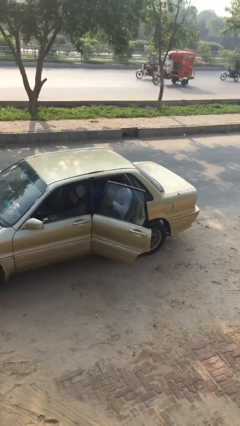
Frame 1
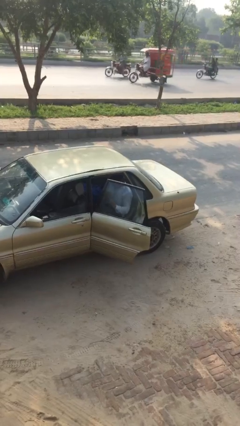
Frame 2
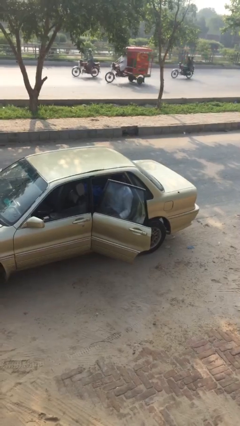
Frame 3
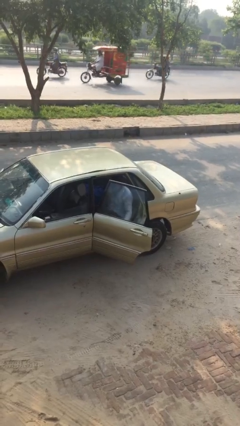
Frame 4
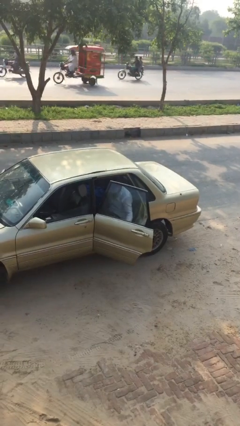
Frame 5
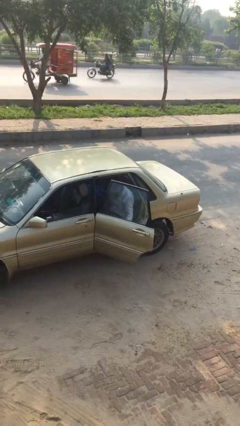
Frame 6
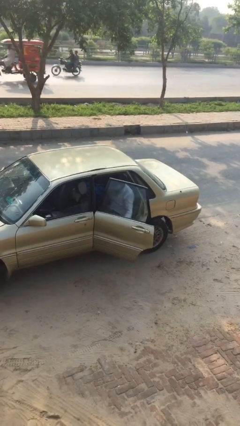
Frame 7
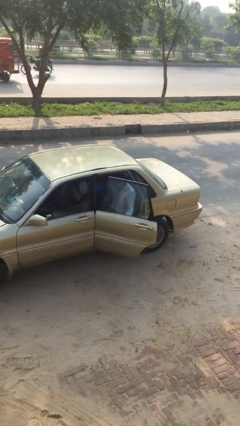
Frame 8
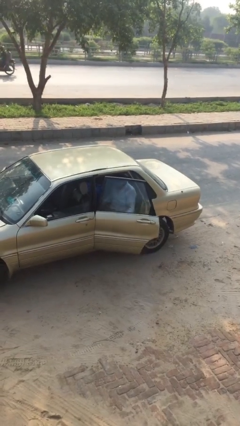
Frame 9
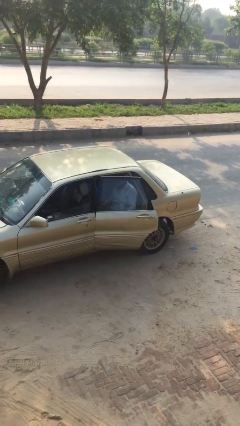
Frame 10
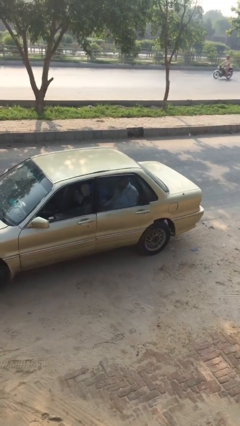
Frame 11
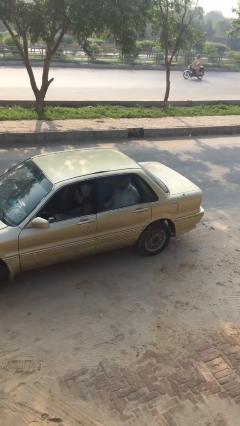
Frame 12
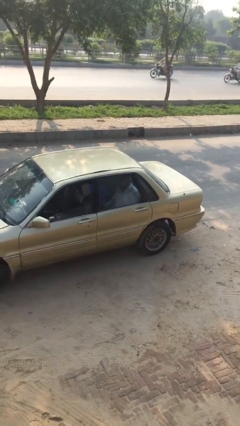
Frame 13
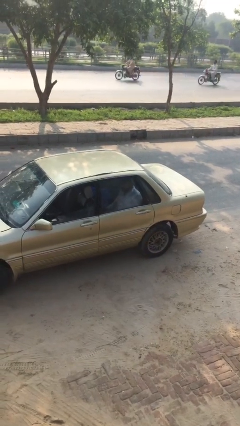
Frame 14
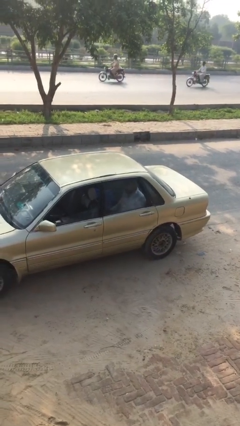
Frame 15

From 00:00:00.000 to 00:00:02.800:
person closes car door

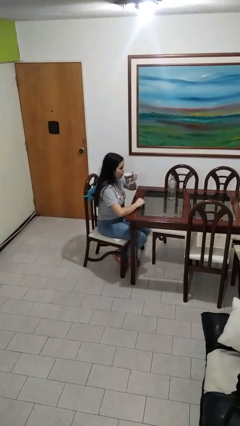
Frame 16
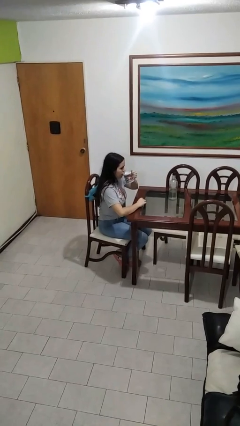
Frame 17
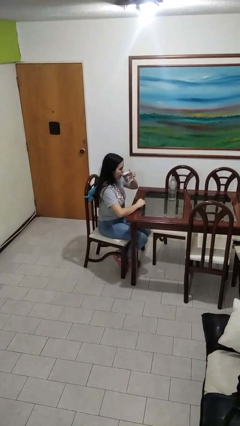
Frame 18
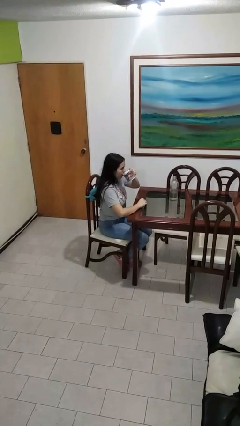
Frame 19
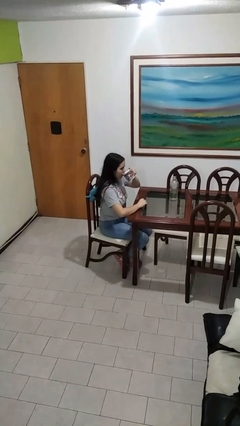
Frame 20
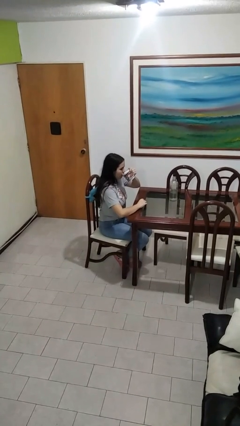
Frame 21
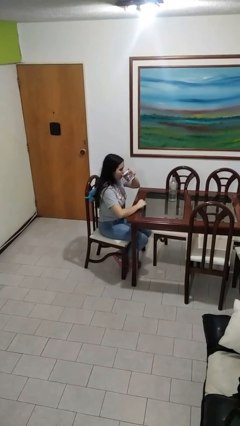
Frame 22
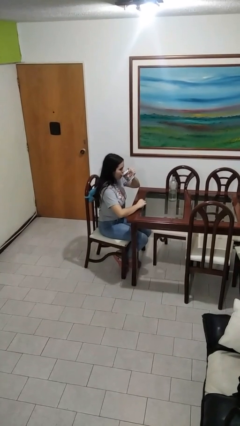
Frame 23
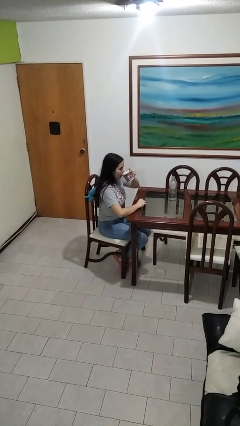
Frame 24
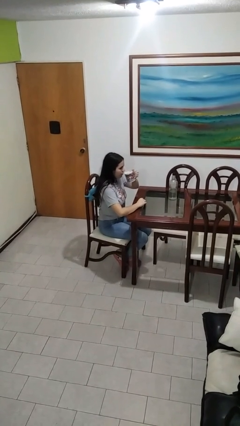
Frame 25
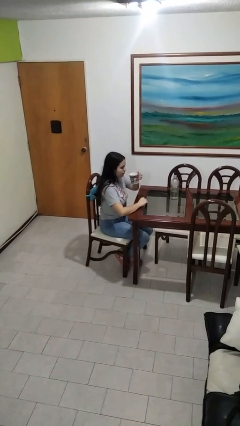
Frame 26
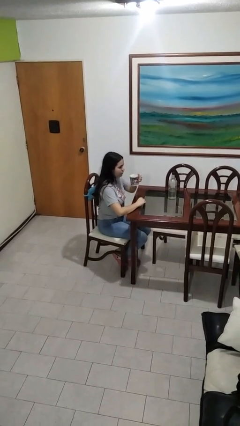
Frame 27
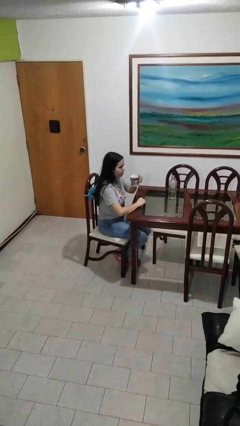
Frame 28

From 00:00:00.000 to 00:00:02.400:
person drinks from mug

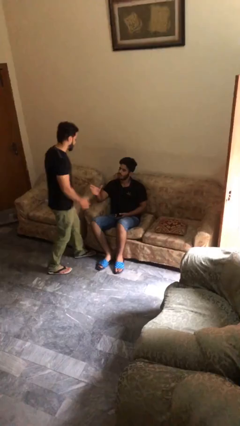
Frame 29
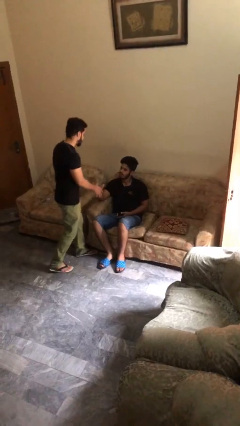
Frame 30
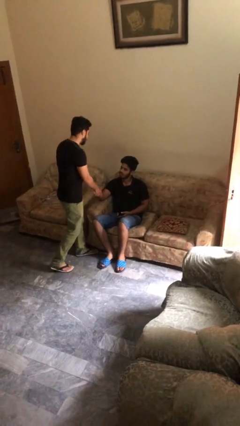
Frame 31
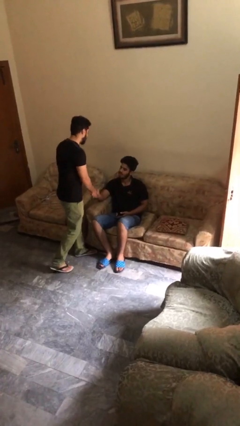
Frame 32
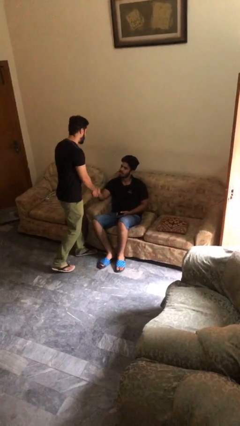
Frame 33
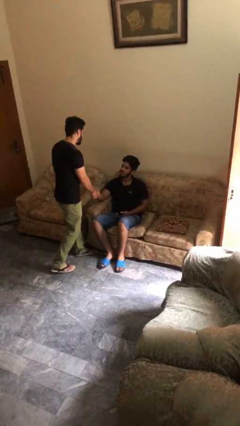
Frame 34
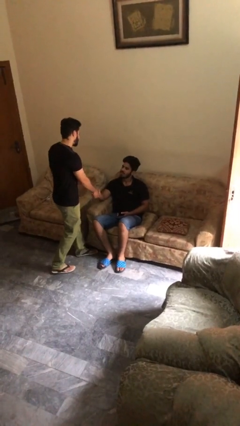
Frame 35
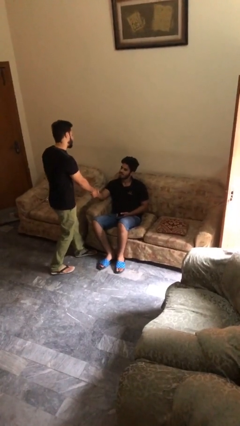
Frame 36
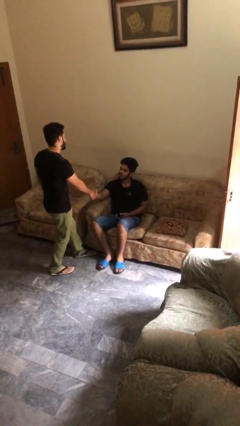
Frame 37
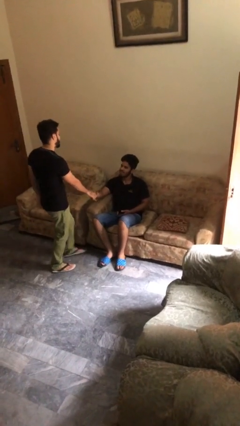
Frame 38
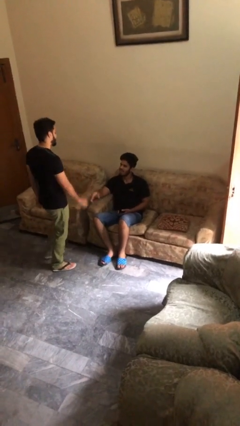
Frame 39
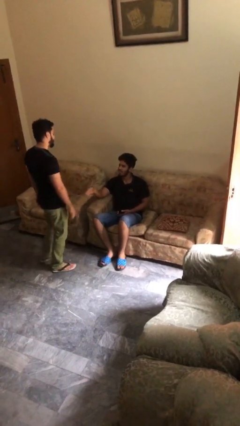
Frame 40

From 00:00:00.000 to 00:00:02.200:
person shakes hand

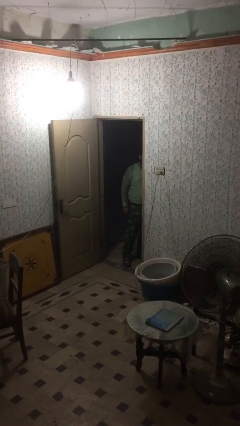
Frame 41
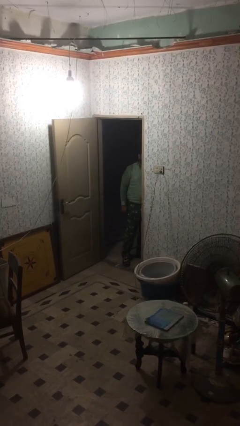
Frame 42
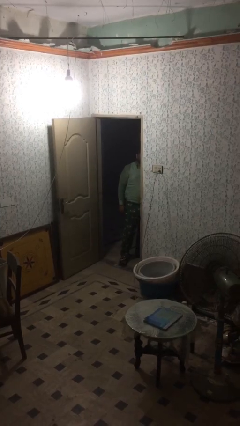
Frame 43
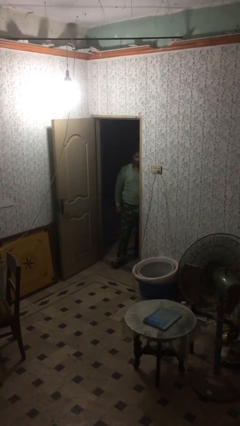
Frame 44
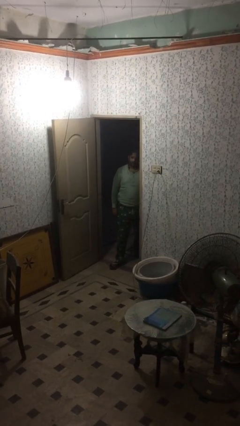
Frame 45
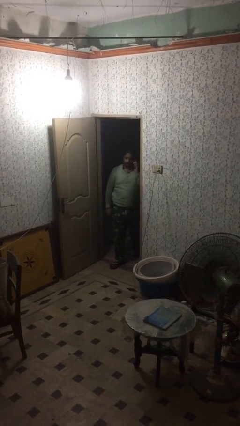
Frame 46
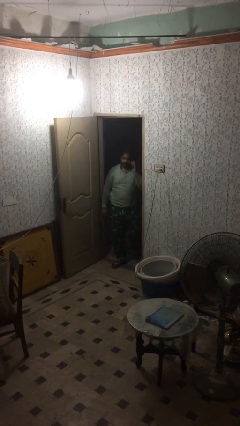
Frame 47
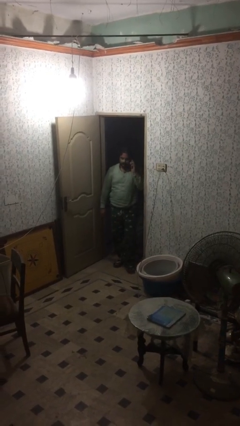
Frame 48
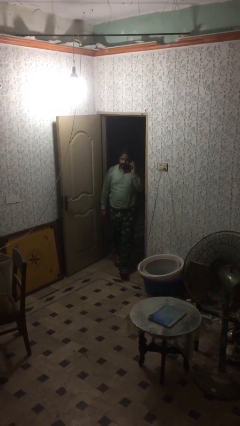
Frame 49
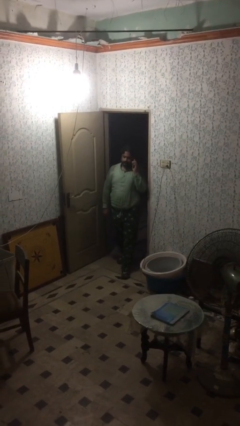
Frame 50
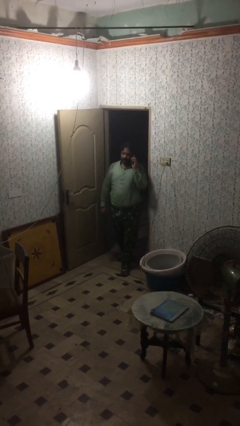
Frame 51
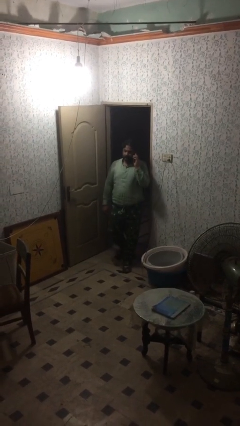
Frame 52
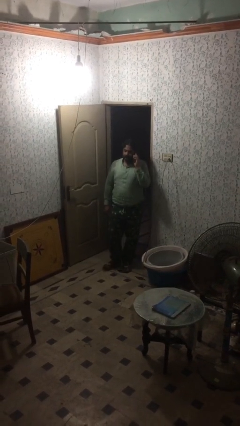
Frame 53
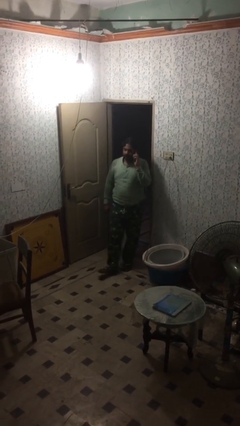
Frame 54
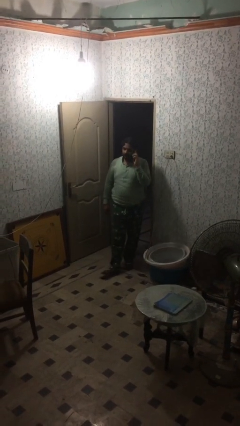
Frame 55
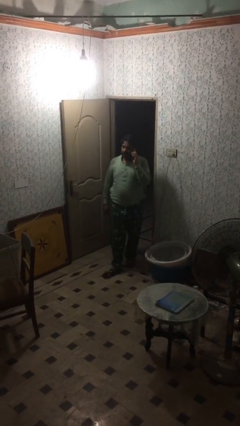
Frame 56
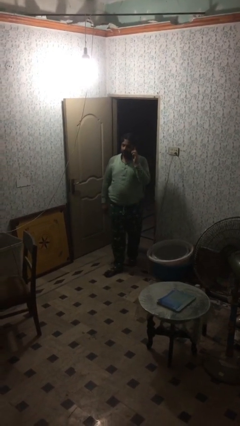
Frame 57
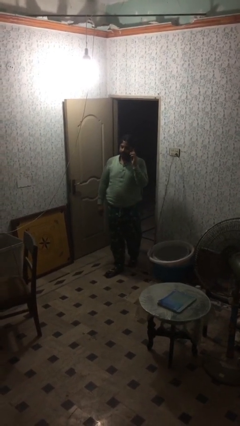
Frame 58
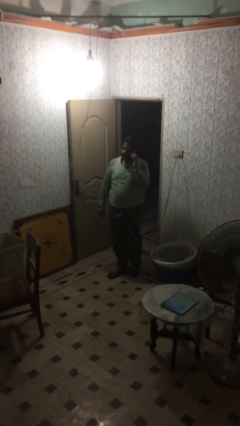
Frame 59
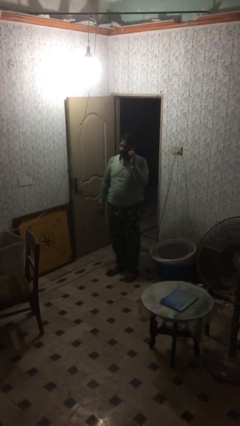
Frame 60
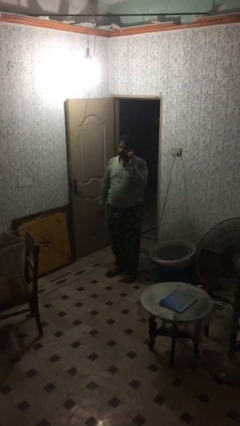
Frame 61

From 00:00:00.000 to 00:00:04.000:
person enters scene through structure

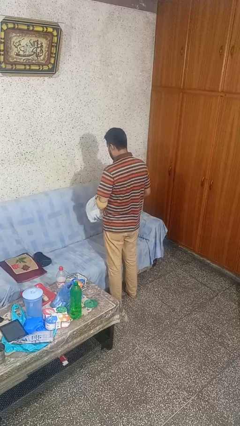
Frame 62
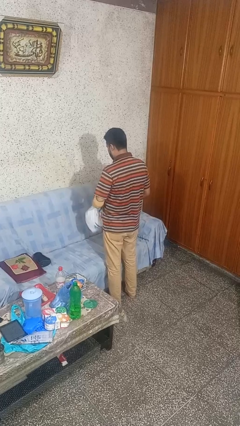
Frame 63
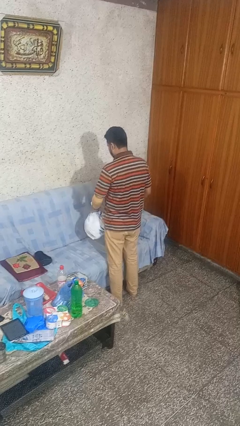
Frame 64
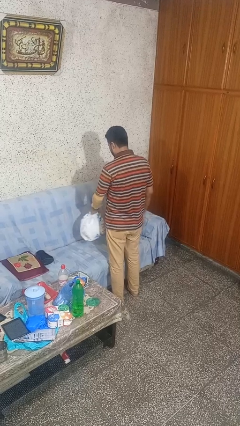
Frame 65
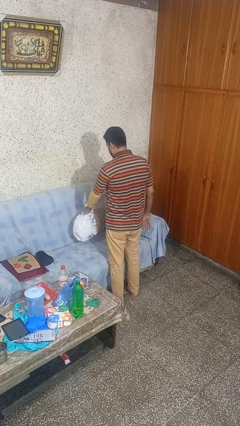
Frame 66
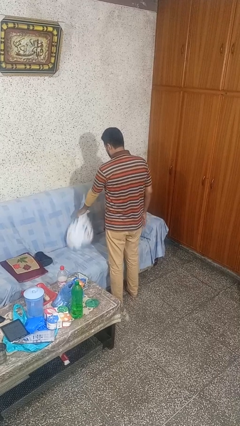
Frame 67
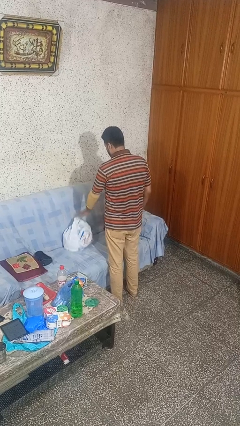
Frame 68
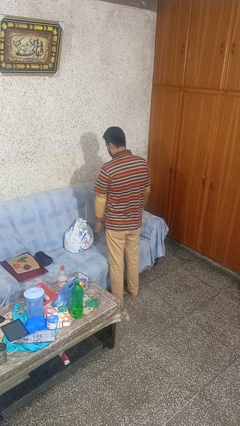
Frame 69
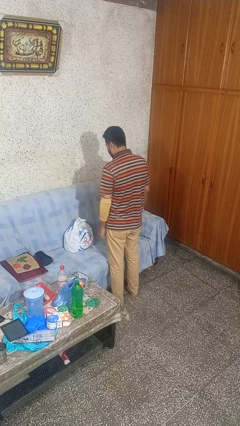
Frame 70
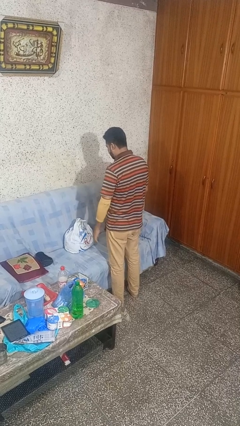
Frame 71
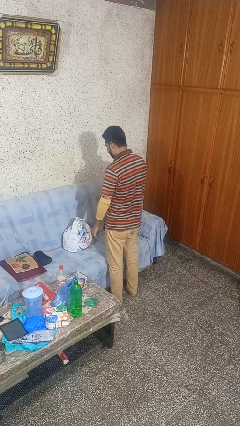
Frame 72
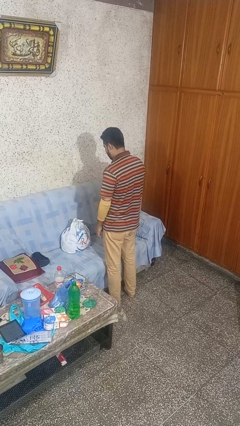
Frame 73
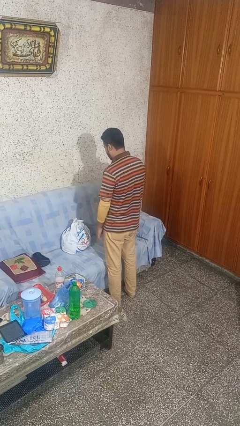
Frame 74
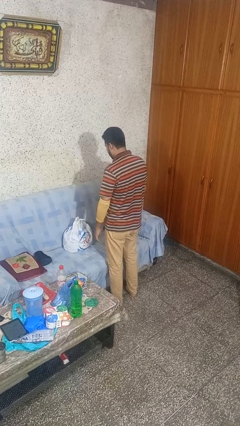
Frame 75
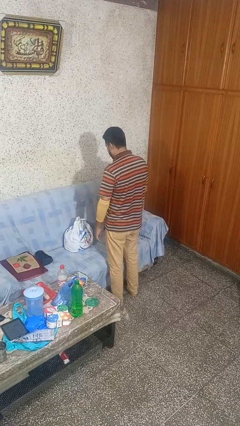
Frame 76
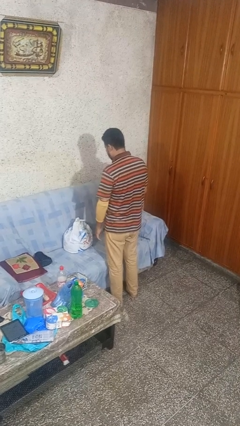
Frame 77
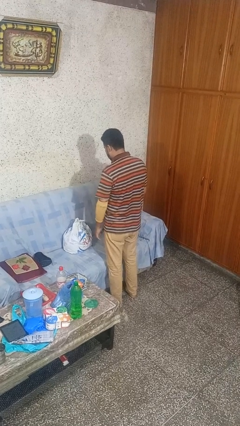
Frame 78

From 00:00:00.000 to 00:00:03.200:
person puts down object on couch

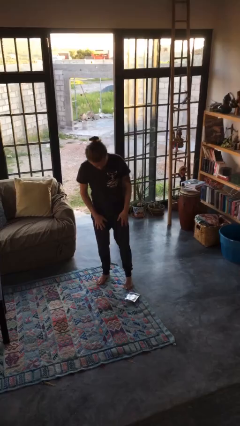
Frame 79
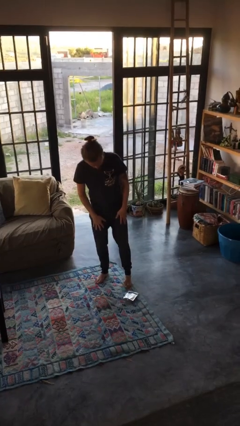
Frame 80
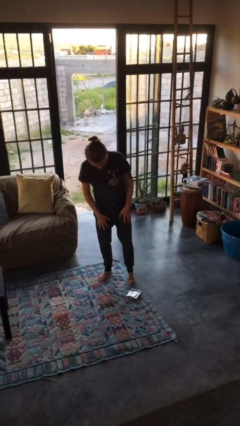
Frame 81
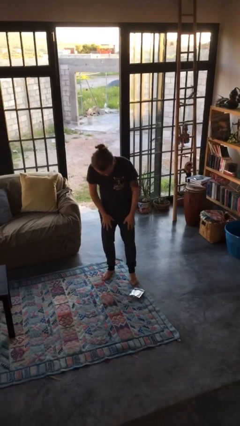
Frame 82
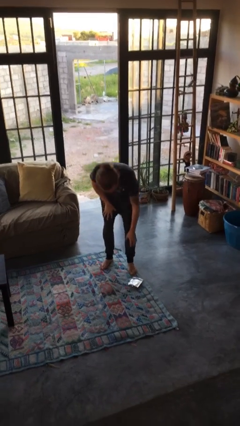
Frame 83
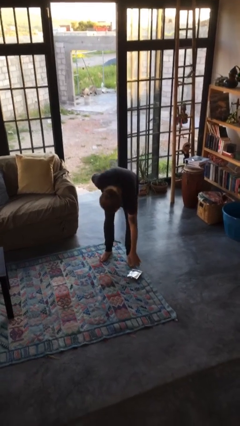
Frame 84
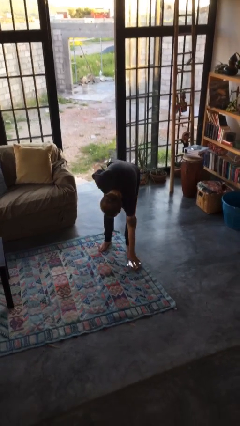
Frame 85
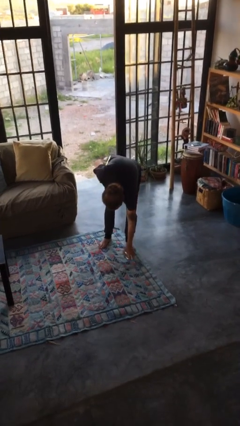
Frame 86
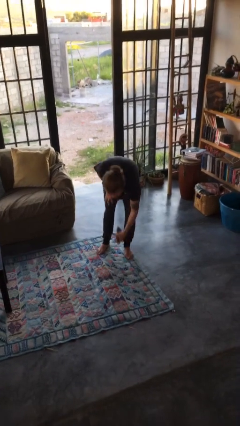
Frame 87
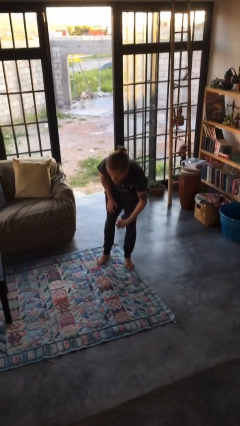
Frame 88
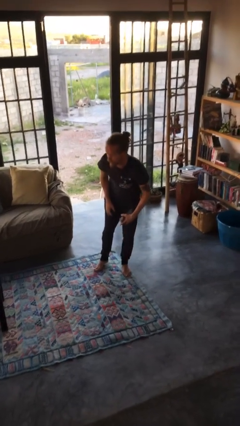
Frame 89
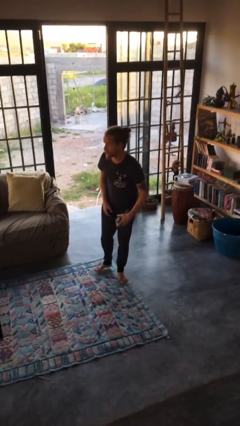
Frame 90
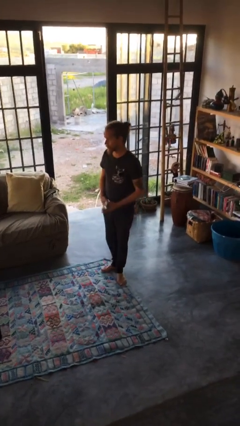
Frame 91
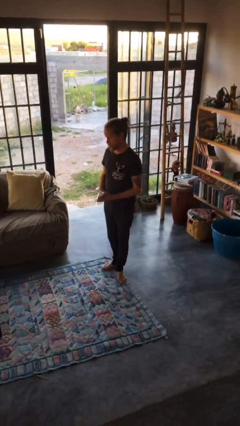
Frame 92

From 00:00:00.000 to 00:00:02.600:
person picks up object from floor
